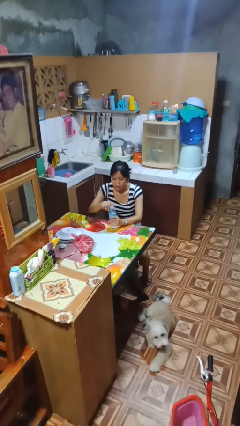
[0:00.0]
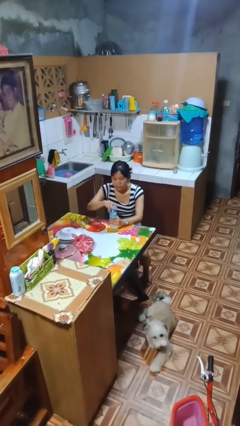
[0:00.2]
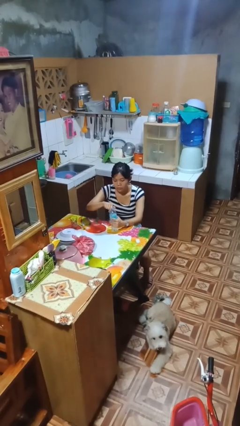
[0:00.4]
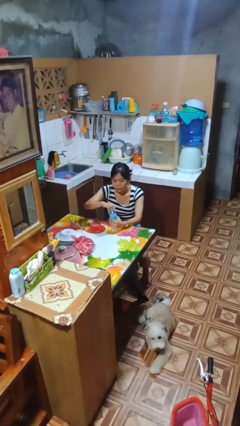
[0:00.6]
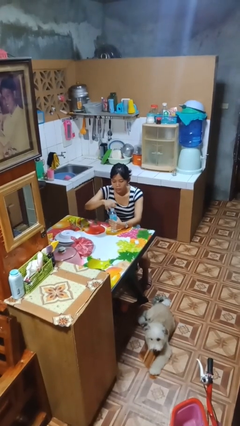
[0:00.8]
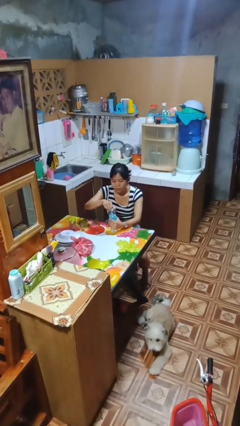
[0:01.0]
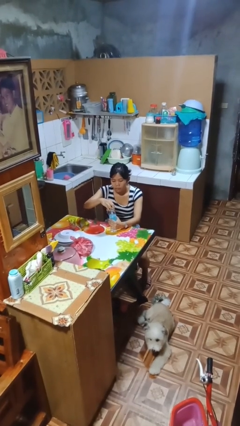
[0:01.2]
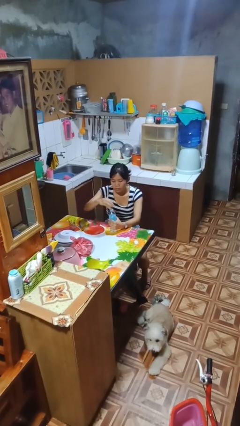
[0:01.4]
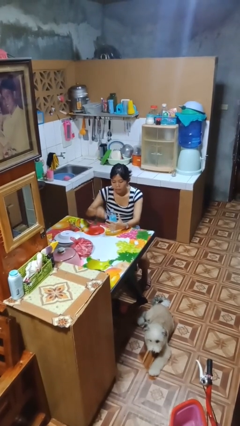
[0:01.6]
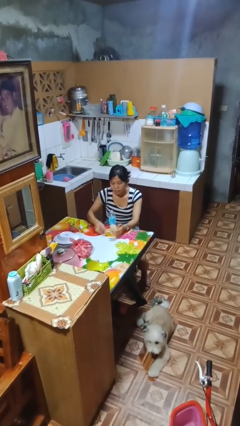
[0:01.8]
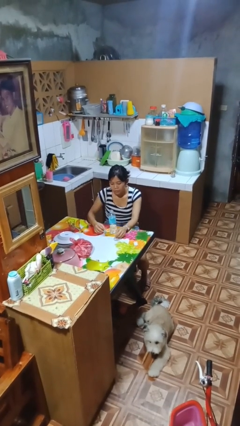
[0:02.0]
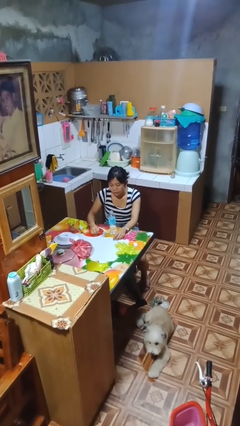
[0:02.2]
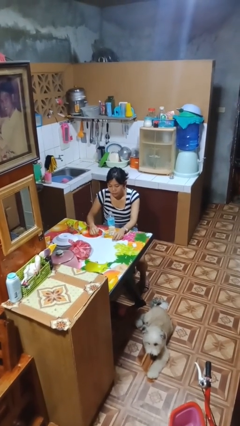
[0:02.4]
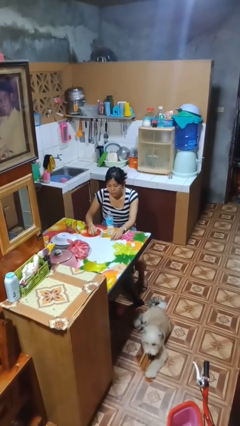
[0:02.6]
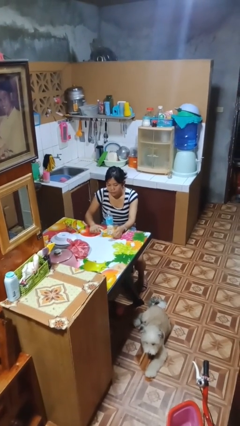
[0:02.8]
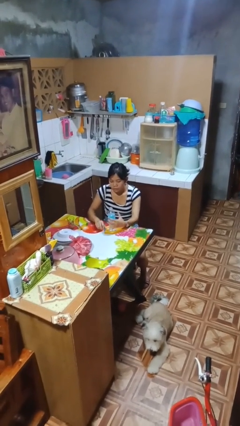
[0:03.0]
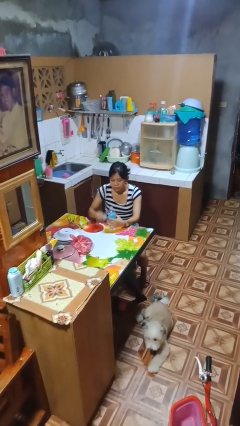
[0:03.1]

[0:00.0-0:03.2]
person unscrews lid from bottle

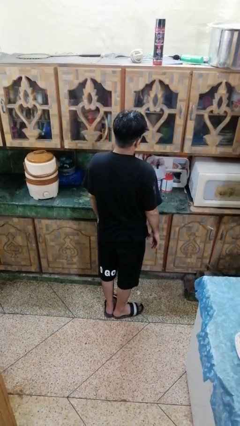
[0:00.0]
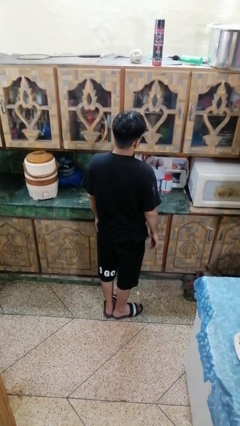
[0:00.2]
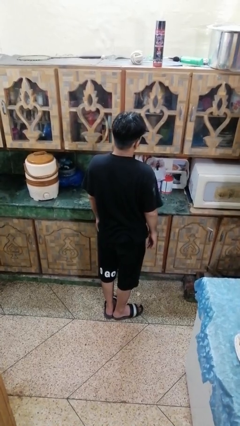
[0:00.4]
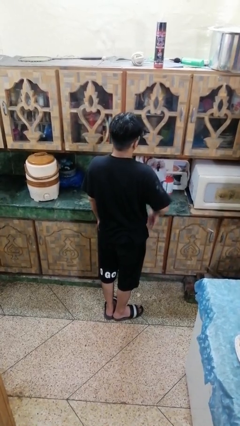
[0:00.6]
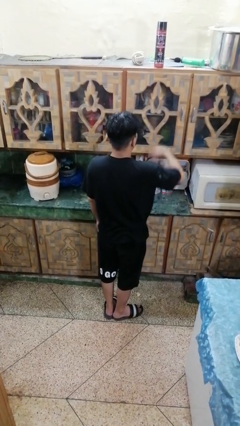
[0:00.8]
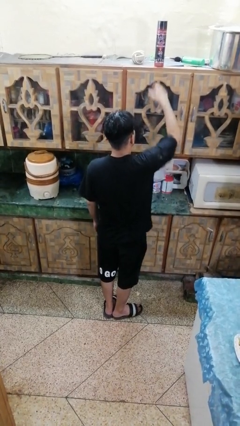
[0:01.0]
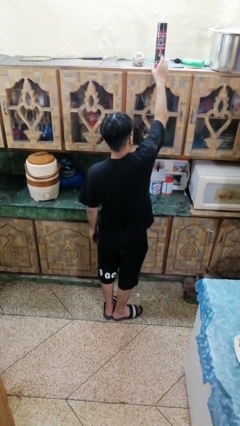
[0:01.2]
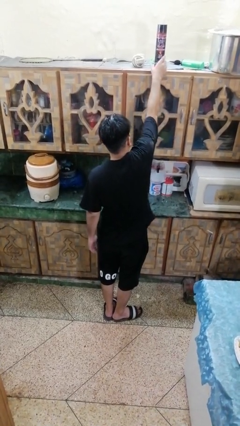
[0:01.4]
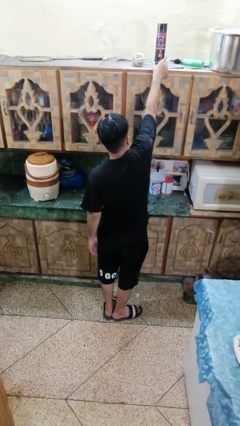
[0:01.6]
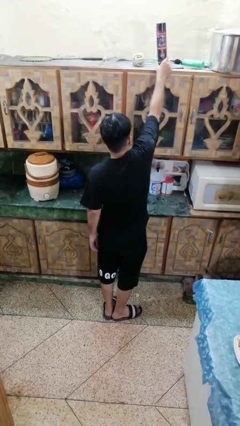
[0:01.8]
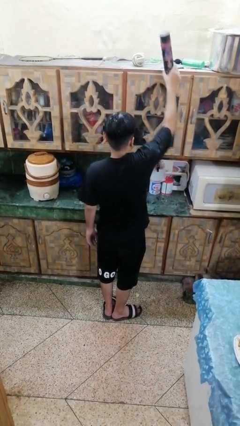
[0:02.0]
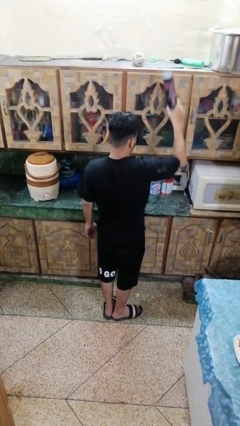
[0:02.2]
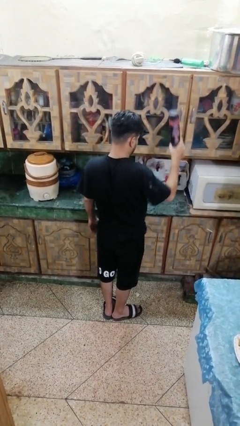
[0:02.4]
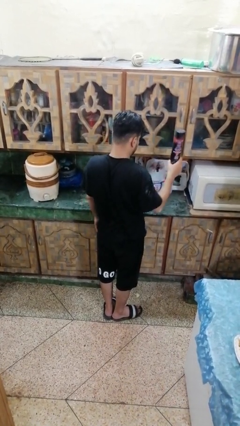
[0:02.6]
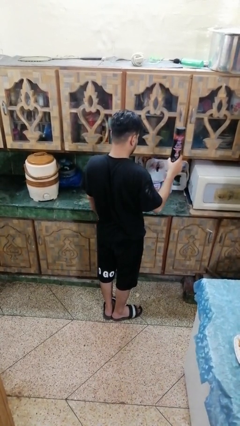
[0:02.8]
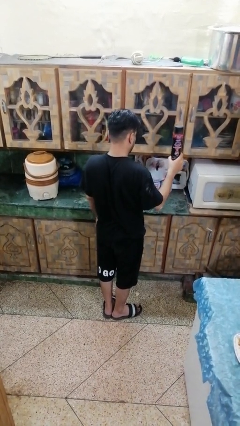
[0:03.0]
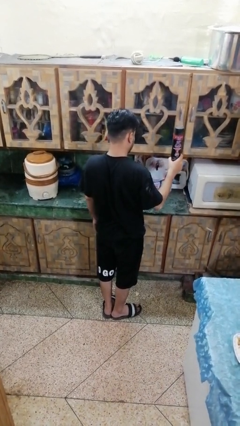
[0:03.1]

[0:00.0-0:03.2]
person picks up object from countertop

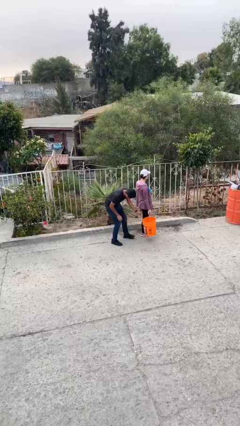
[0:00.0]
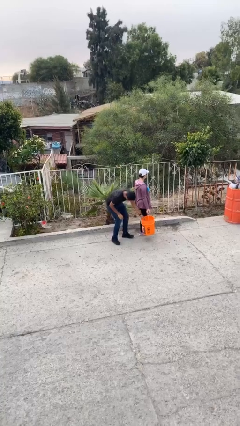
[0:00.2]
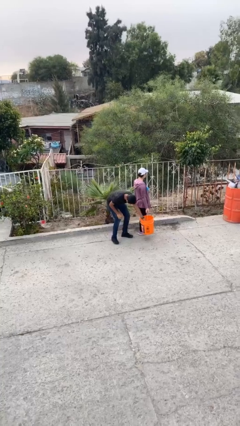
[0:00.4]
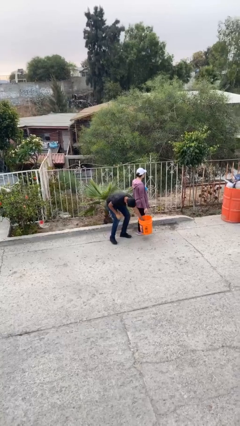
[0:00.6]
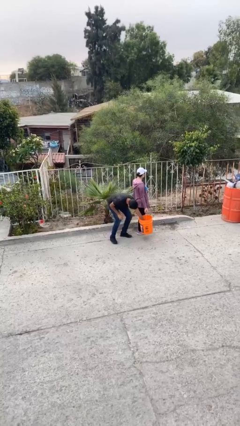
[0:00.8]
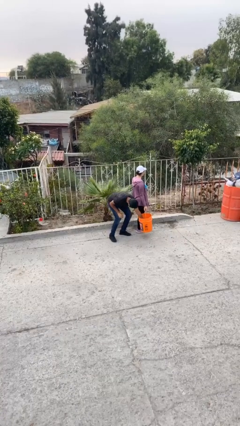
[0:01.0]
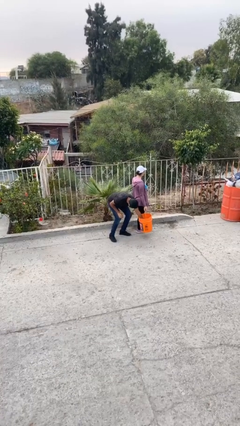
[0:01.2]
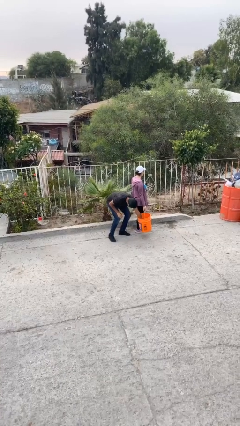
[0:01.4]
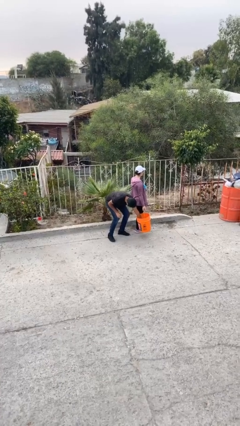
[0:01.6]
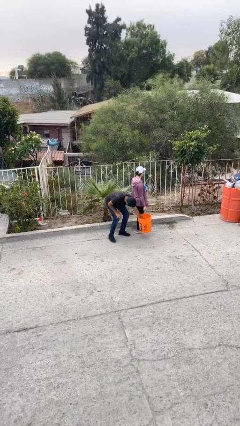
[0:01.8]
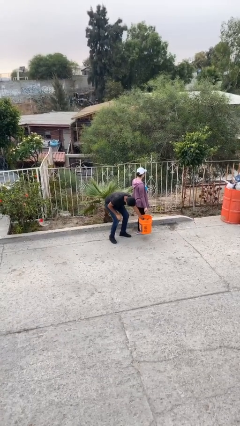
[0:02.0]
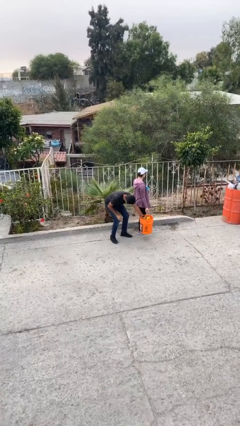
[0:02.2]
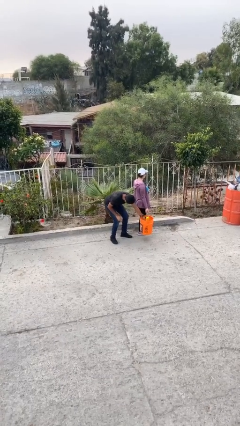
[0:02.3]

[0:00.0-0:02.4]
person steals object from person

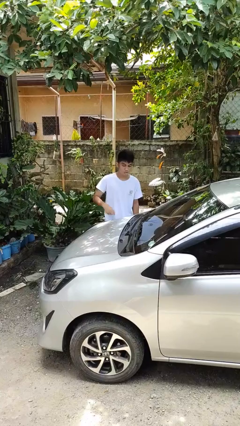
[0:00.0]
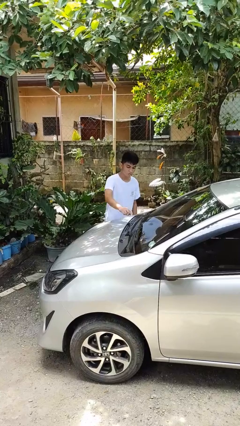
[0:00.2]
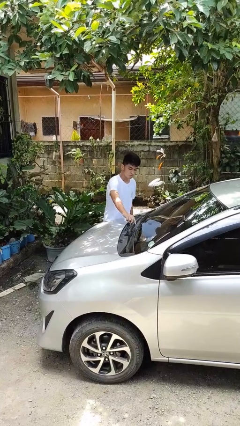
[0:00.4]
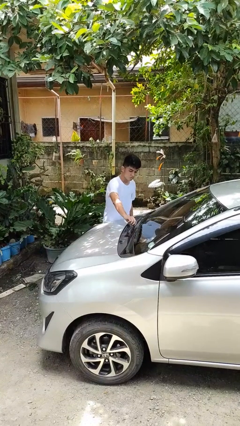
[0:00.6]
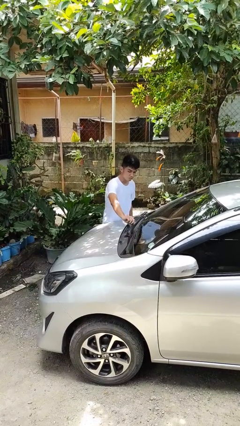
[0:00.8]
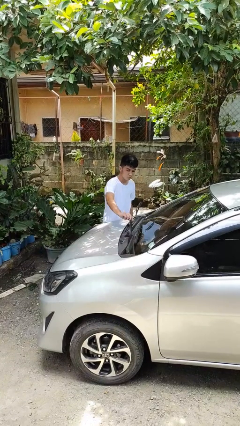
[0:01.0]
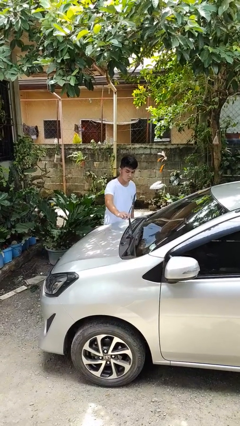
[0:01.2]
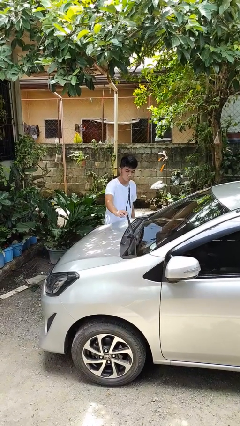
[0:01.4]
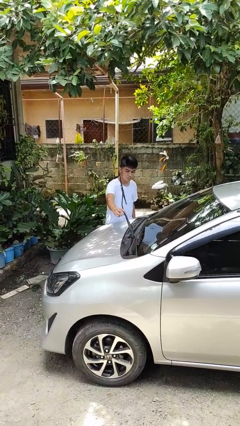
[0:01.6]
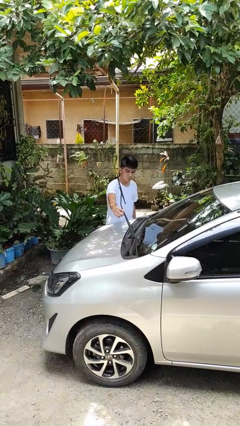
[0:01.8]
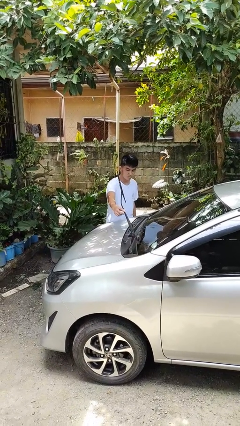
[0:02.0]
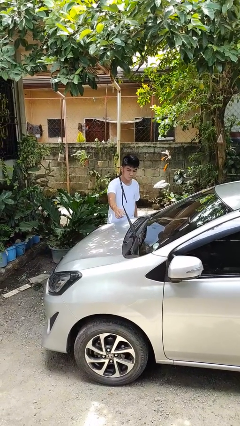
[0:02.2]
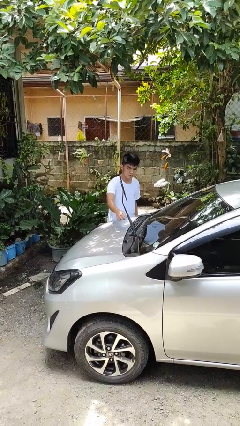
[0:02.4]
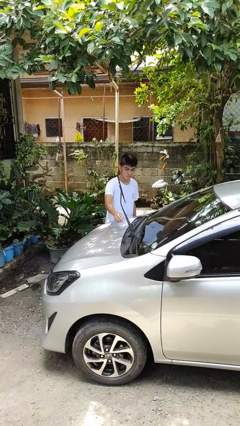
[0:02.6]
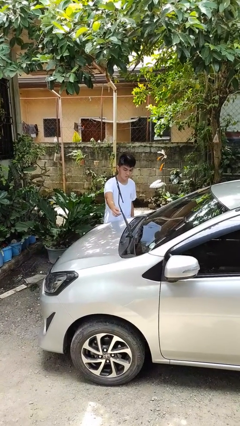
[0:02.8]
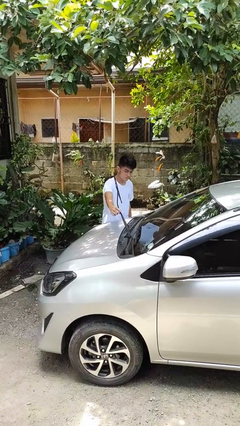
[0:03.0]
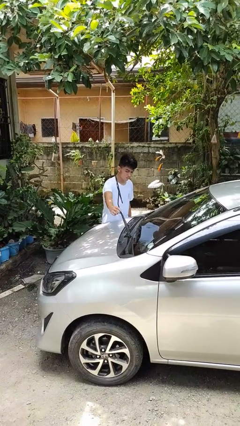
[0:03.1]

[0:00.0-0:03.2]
person flips up car wipers

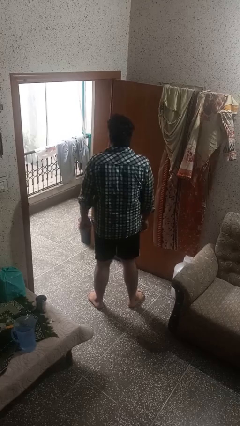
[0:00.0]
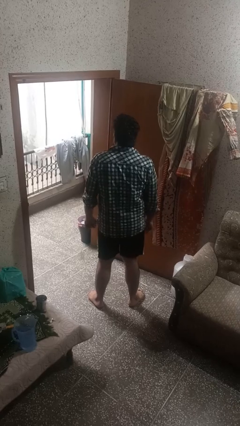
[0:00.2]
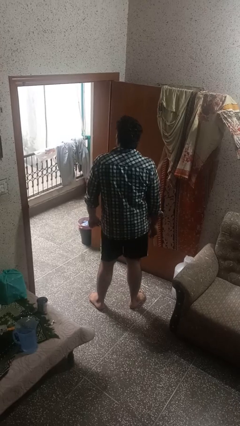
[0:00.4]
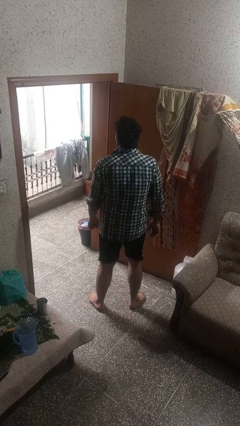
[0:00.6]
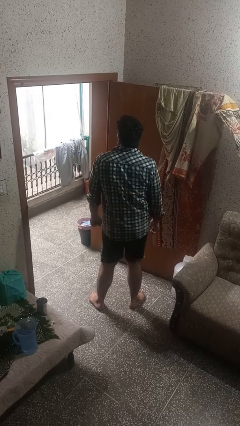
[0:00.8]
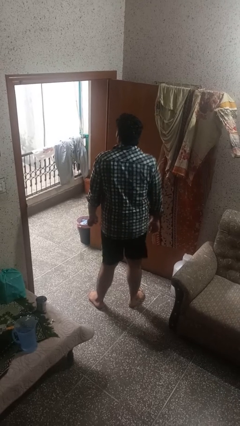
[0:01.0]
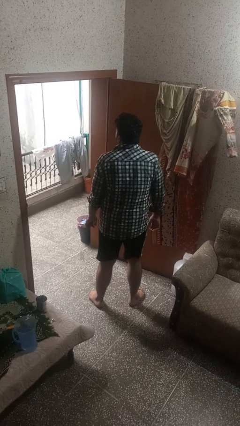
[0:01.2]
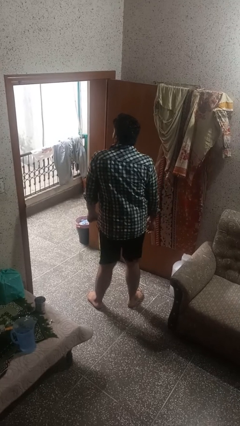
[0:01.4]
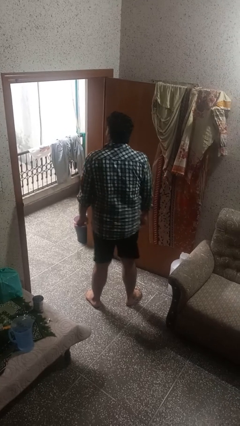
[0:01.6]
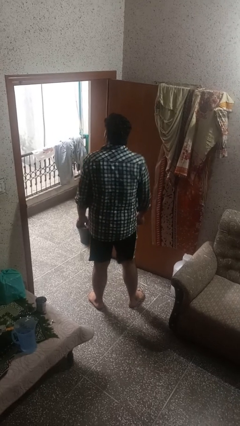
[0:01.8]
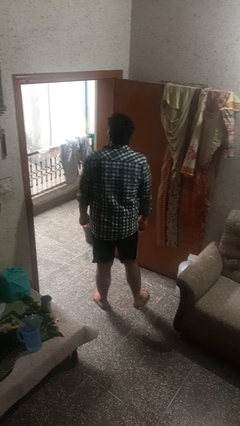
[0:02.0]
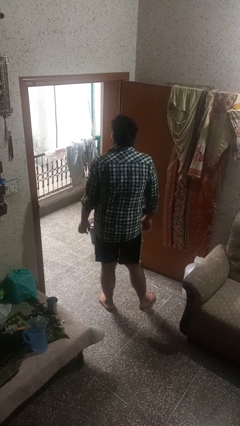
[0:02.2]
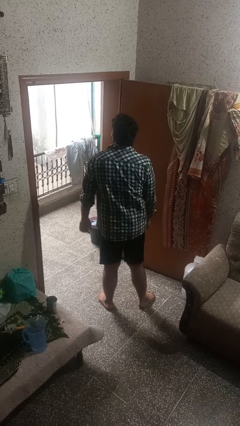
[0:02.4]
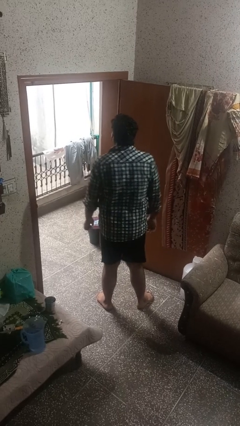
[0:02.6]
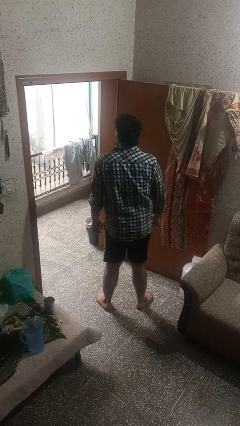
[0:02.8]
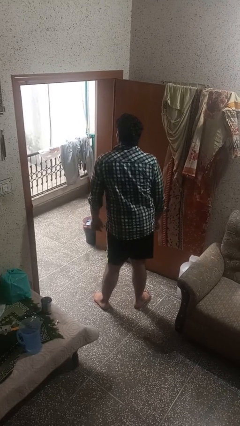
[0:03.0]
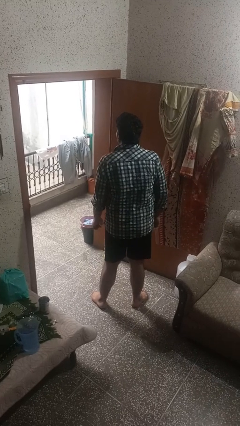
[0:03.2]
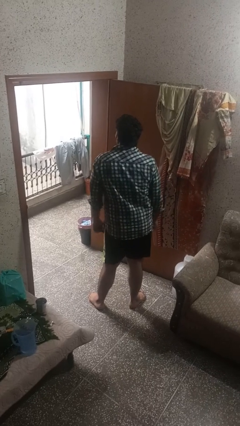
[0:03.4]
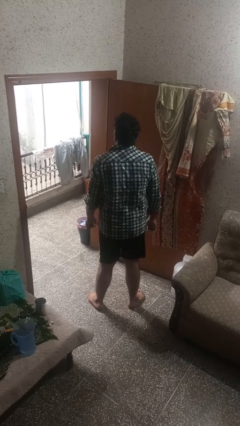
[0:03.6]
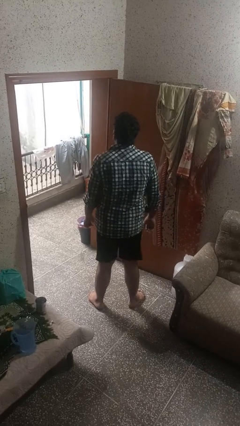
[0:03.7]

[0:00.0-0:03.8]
person wiggles hips

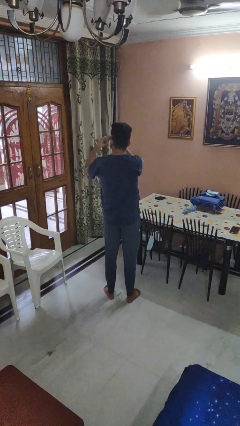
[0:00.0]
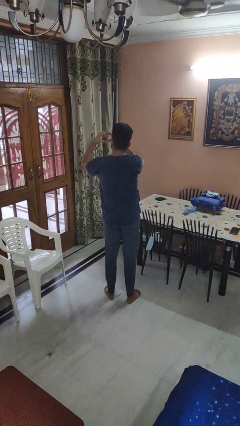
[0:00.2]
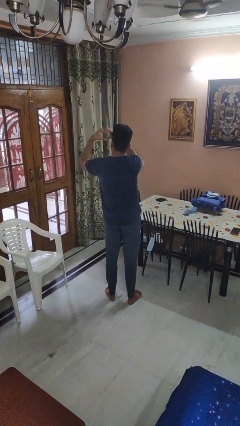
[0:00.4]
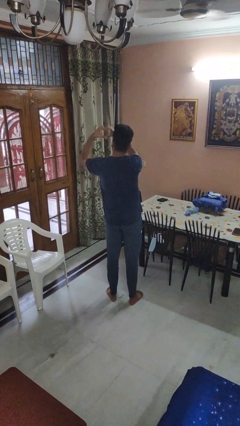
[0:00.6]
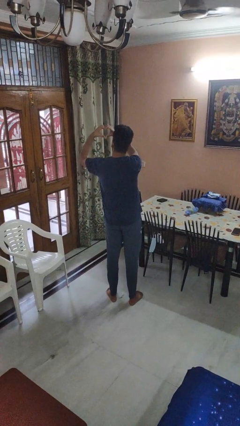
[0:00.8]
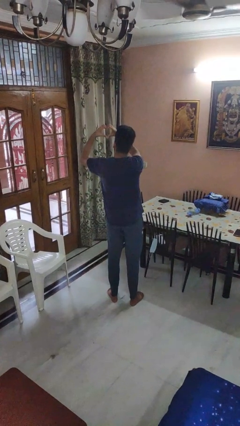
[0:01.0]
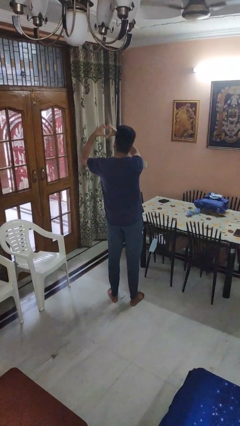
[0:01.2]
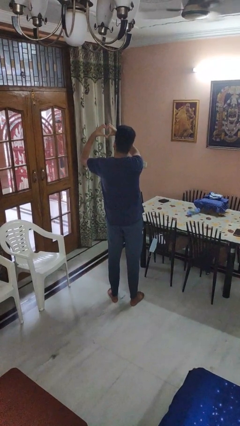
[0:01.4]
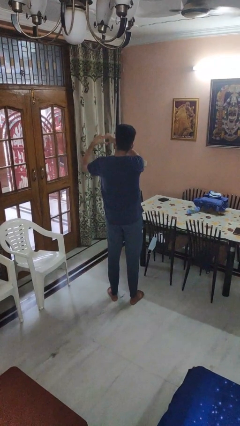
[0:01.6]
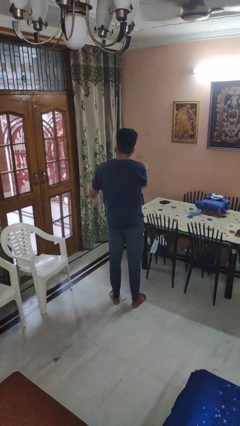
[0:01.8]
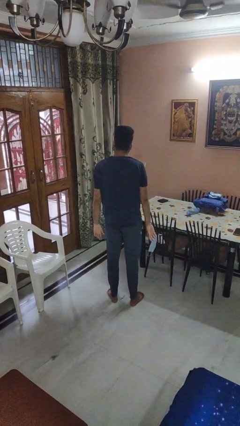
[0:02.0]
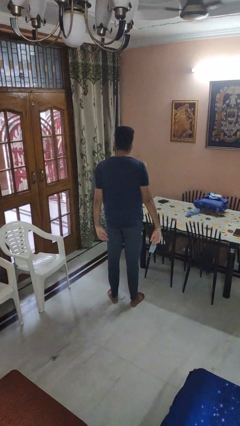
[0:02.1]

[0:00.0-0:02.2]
person gestures heart
